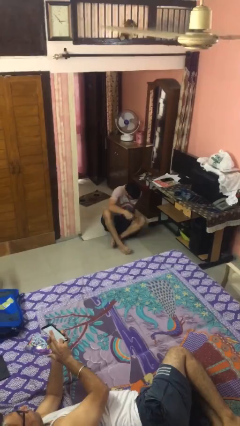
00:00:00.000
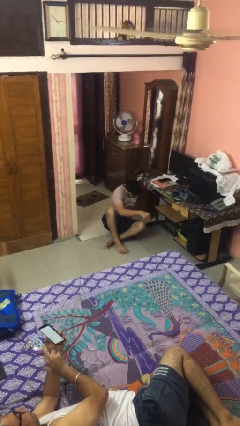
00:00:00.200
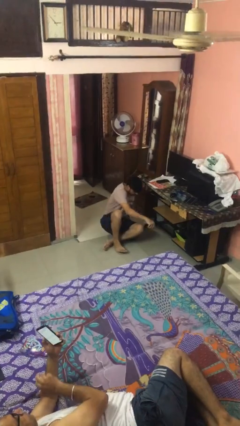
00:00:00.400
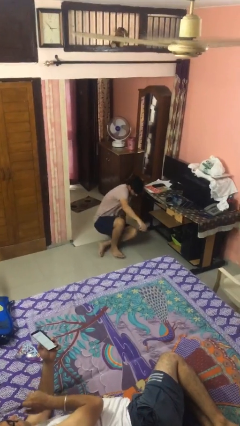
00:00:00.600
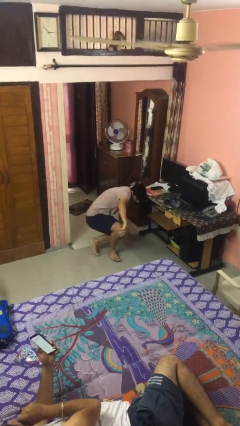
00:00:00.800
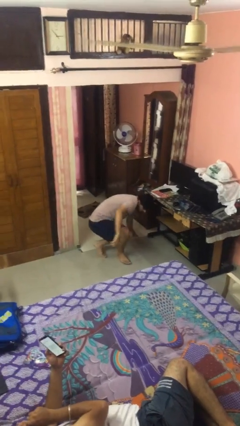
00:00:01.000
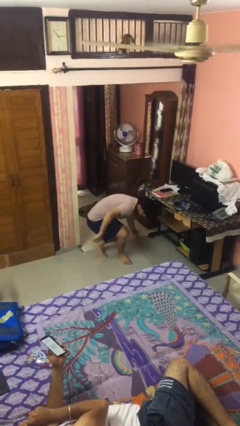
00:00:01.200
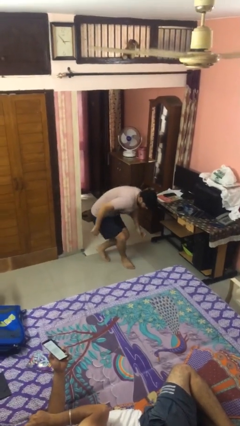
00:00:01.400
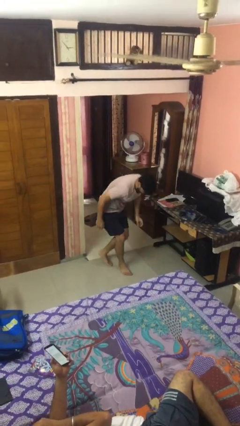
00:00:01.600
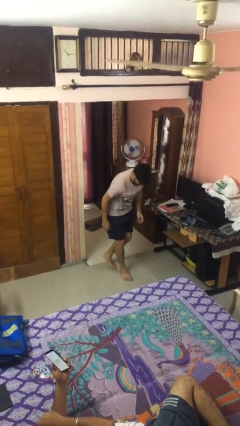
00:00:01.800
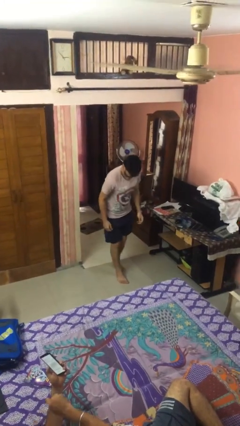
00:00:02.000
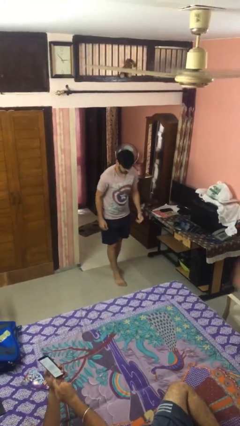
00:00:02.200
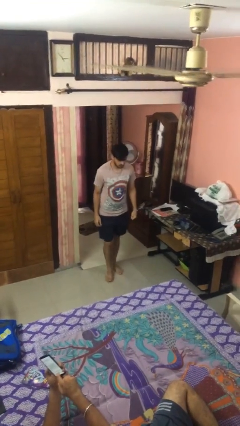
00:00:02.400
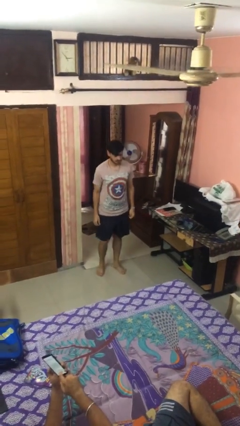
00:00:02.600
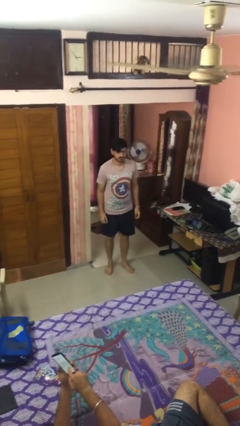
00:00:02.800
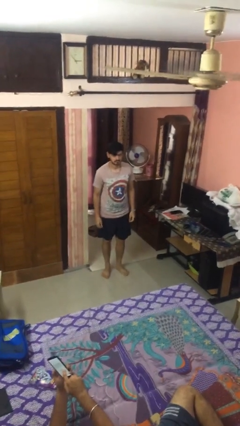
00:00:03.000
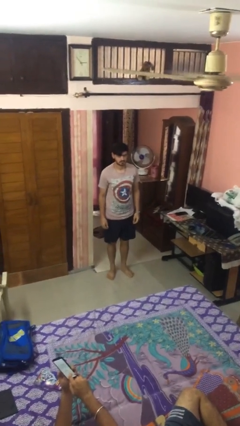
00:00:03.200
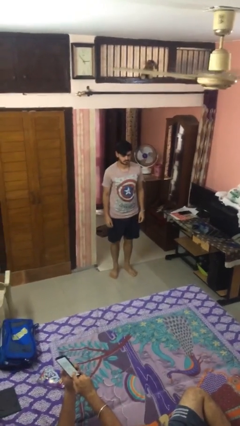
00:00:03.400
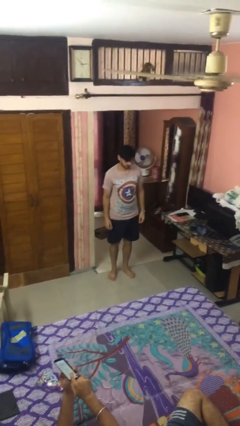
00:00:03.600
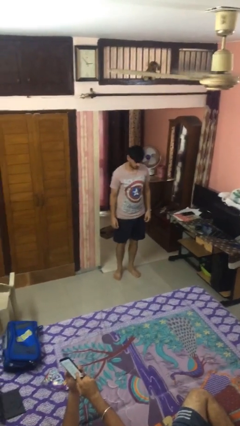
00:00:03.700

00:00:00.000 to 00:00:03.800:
person stands up from floor

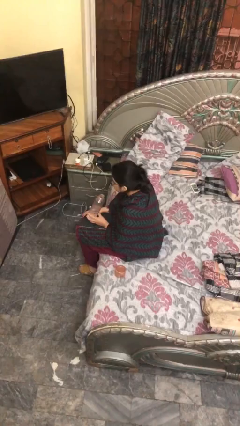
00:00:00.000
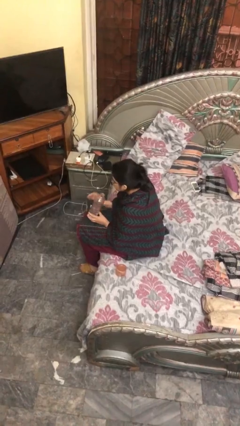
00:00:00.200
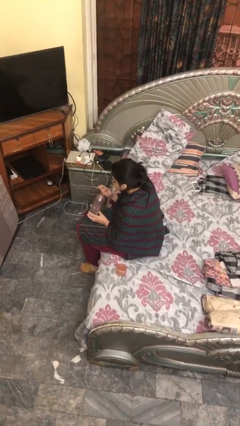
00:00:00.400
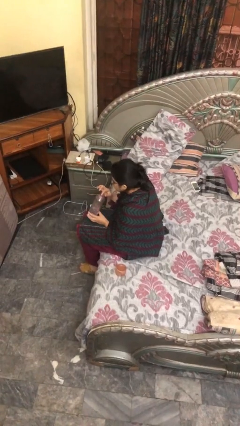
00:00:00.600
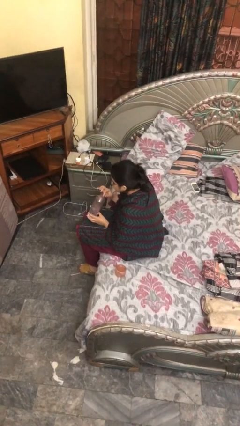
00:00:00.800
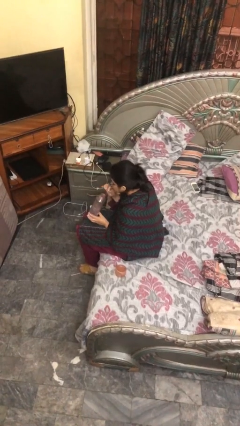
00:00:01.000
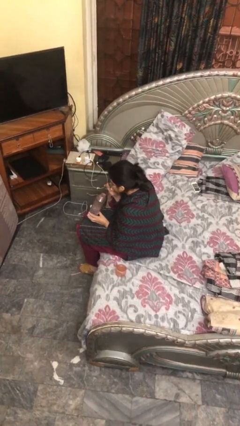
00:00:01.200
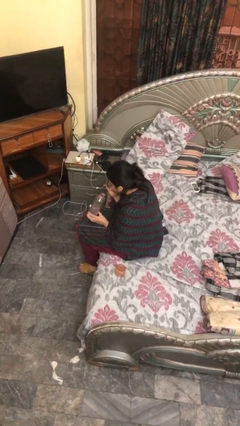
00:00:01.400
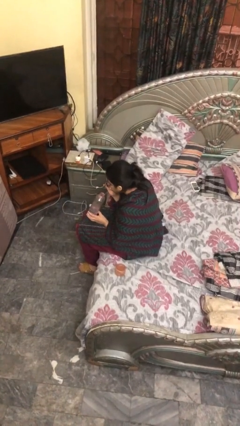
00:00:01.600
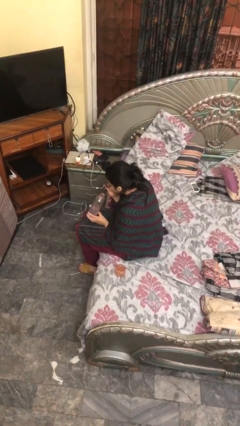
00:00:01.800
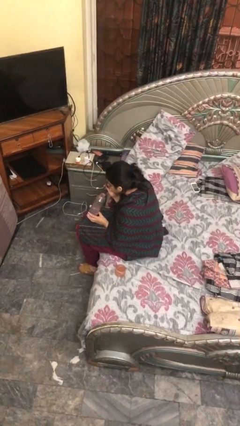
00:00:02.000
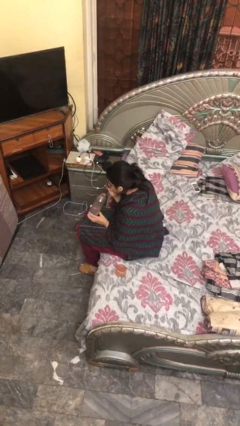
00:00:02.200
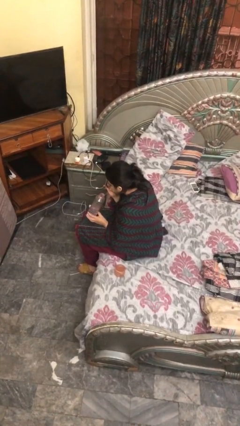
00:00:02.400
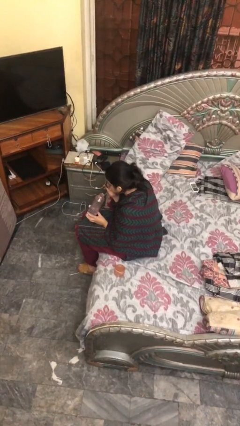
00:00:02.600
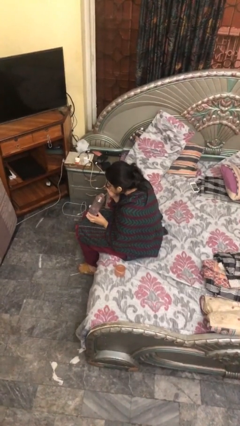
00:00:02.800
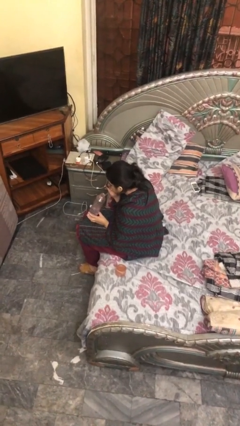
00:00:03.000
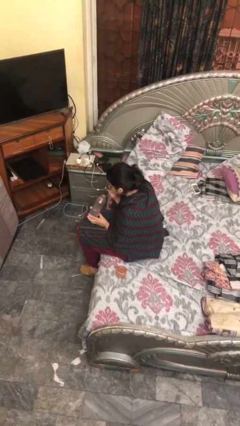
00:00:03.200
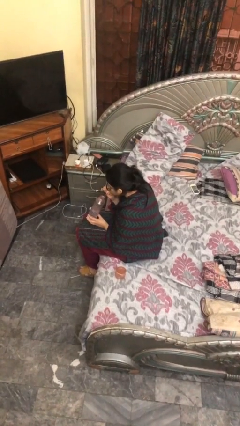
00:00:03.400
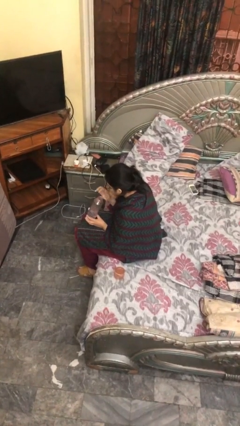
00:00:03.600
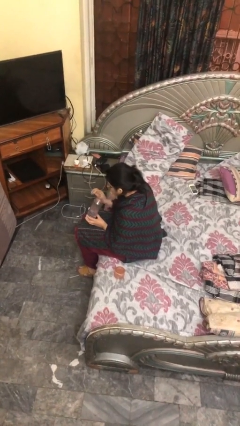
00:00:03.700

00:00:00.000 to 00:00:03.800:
person drinks from straw

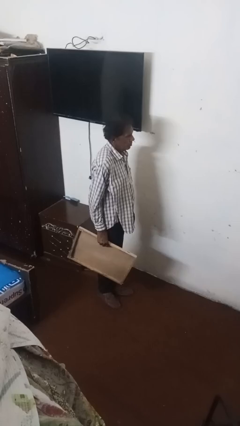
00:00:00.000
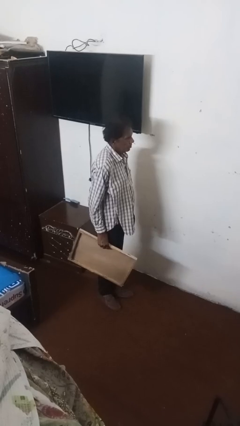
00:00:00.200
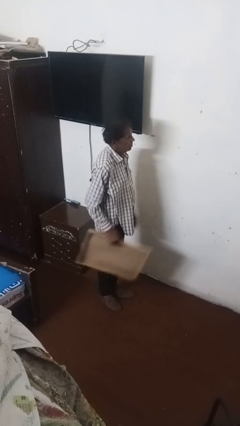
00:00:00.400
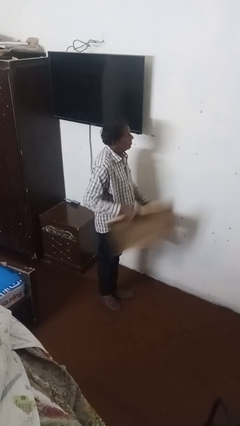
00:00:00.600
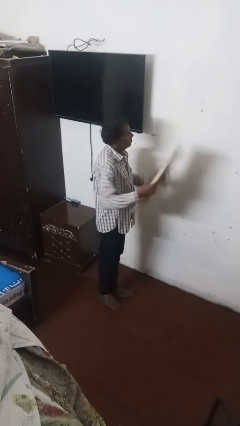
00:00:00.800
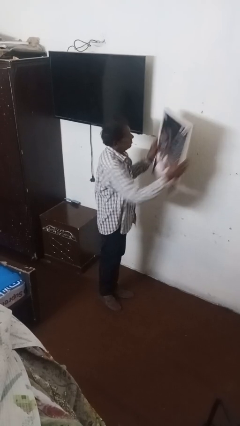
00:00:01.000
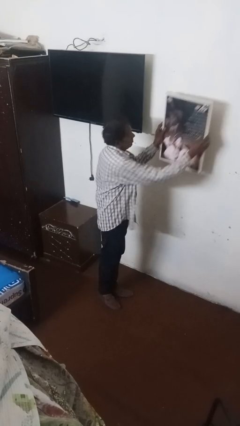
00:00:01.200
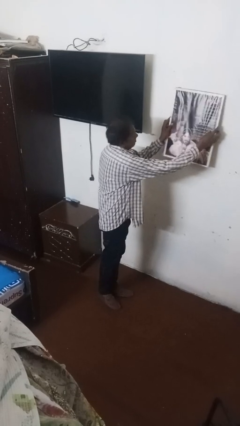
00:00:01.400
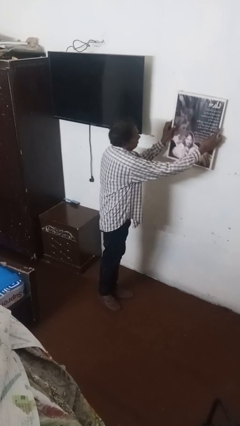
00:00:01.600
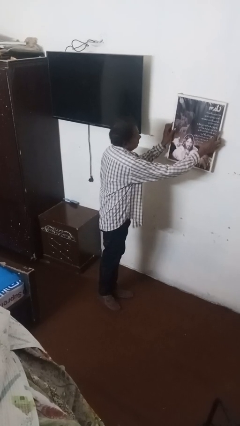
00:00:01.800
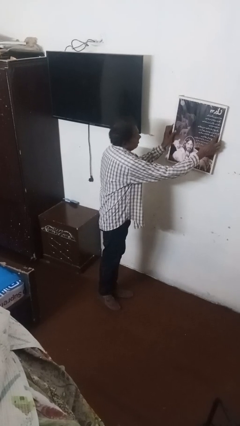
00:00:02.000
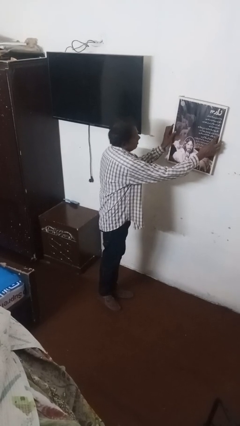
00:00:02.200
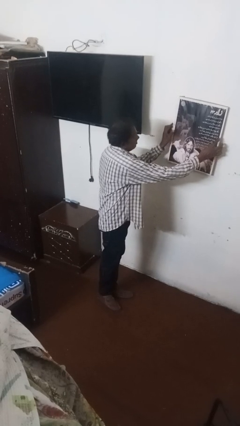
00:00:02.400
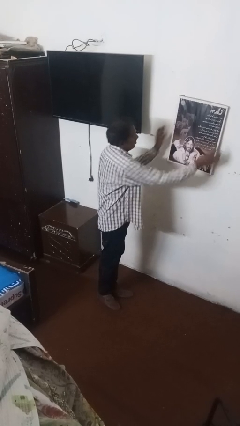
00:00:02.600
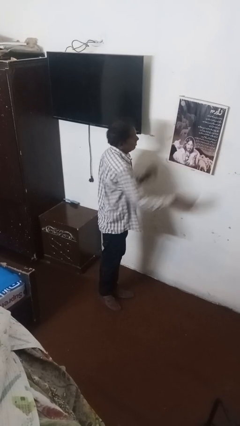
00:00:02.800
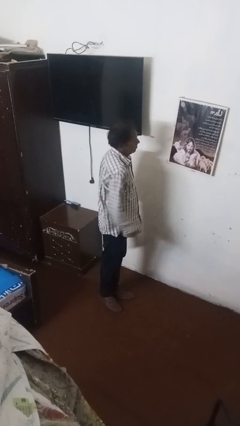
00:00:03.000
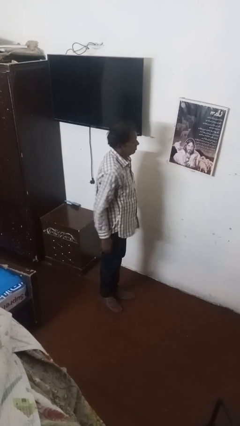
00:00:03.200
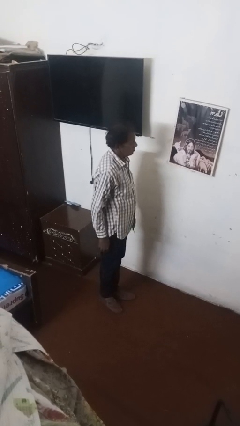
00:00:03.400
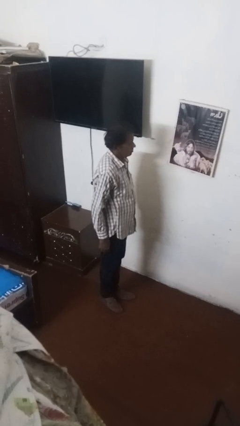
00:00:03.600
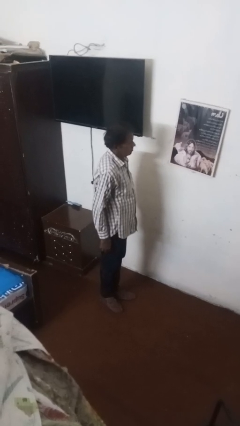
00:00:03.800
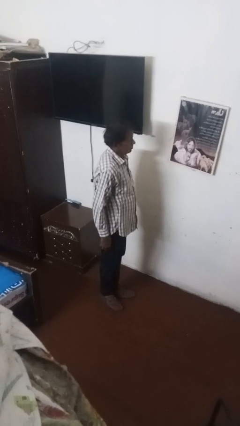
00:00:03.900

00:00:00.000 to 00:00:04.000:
person puts up picture frame

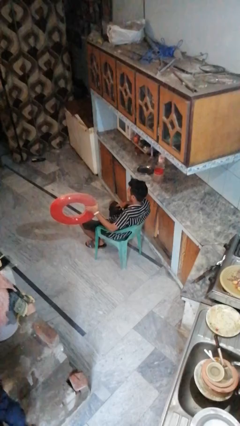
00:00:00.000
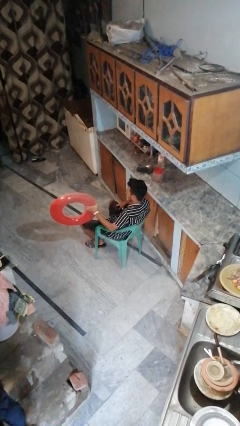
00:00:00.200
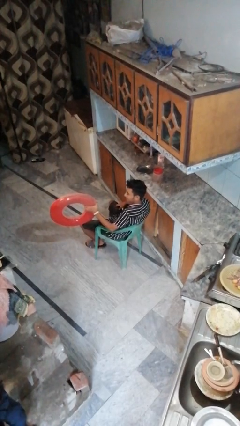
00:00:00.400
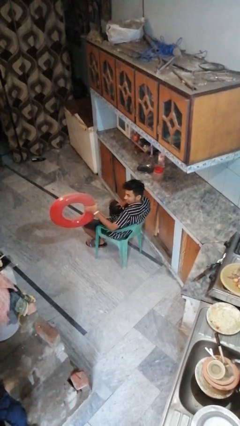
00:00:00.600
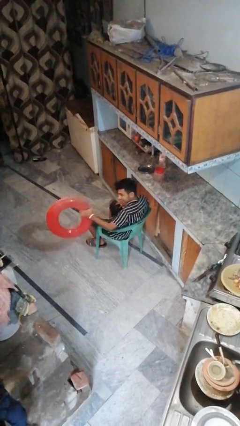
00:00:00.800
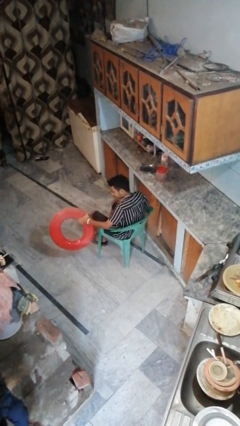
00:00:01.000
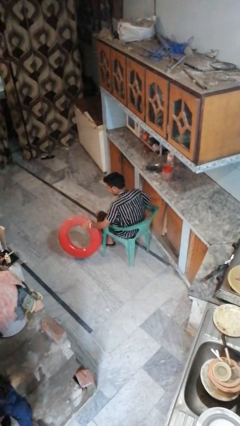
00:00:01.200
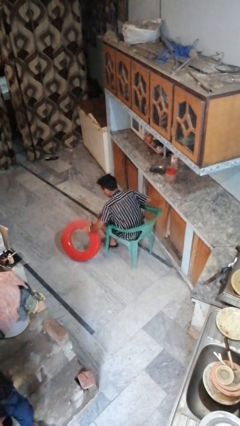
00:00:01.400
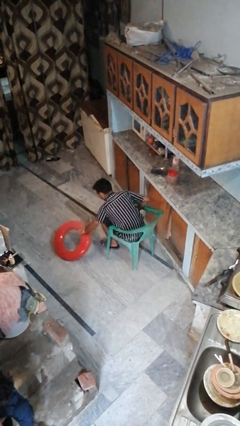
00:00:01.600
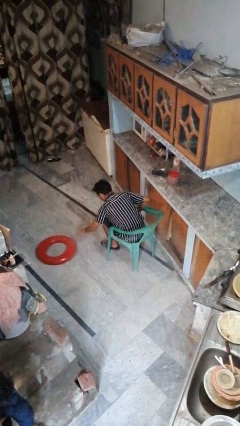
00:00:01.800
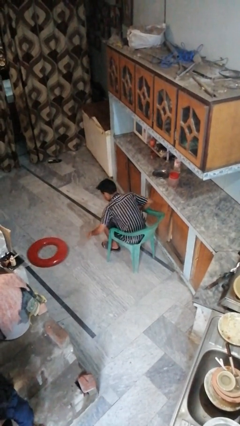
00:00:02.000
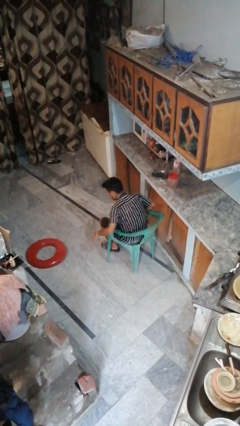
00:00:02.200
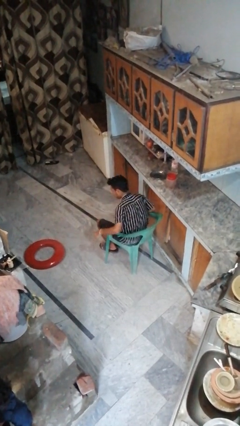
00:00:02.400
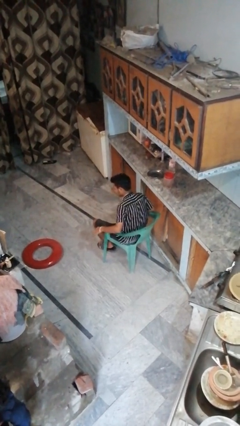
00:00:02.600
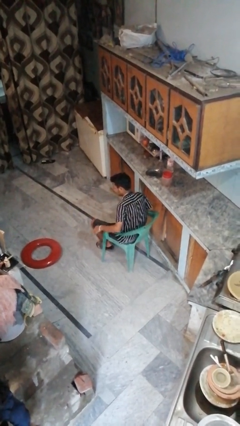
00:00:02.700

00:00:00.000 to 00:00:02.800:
person throws object to ground

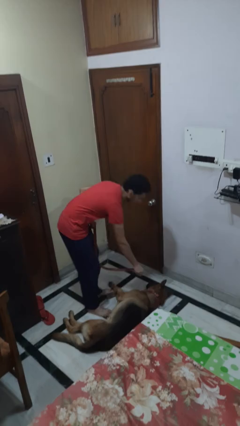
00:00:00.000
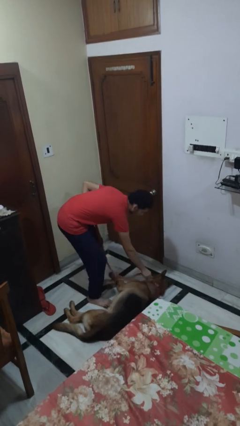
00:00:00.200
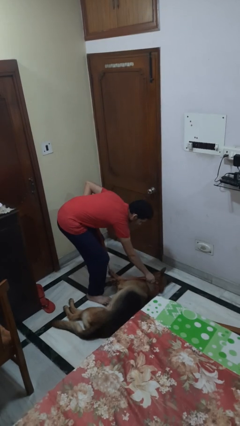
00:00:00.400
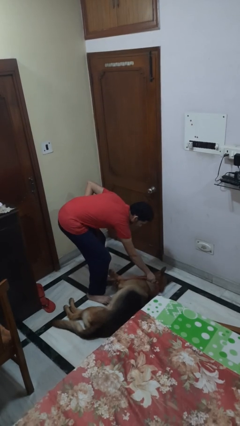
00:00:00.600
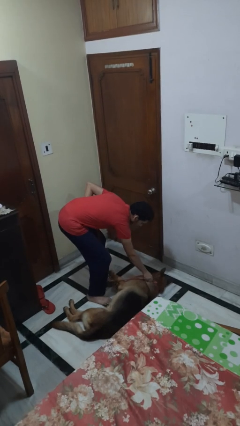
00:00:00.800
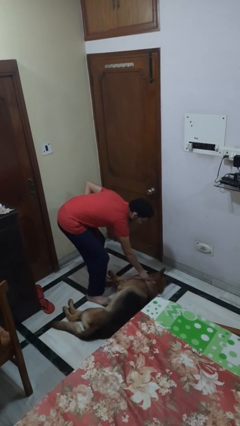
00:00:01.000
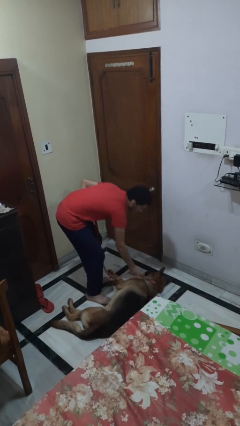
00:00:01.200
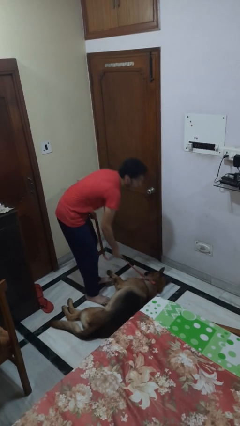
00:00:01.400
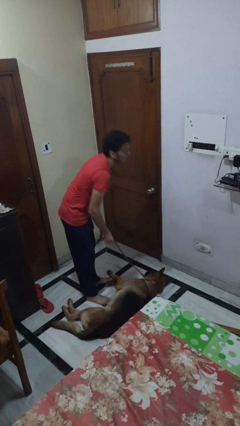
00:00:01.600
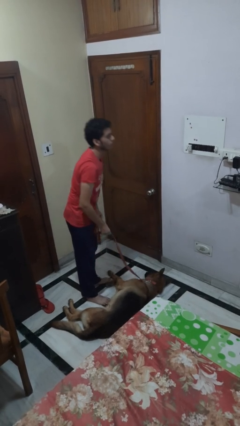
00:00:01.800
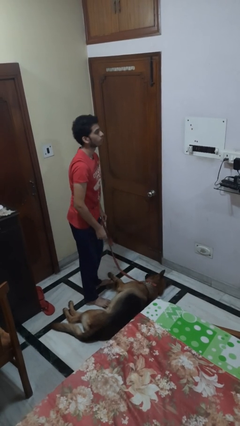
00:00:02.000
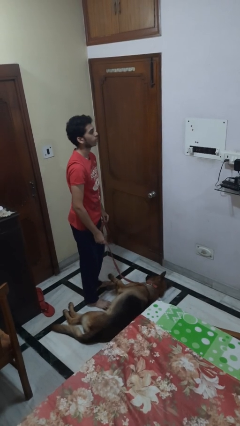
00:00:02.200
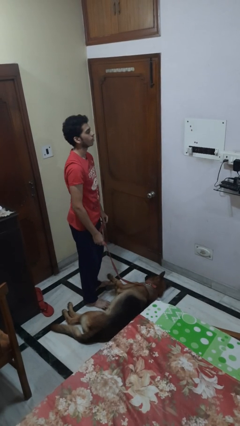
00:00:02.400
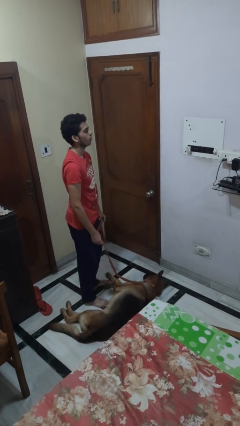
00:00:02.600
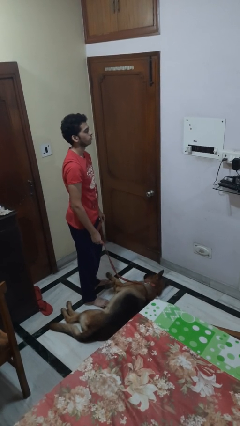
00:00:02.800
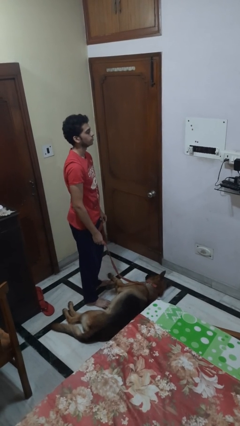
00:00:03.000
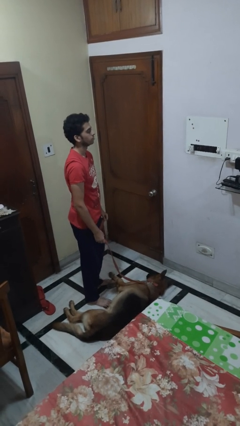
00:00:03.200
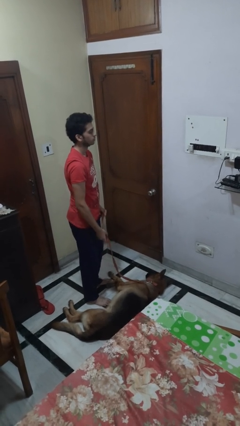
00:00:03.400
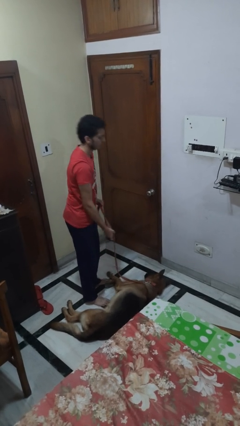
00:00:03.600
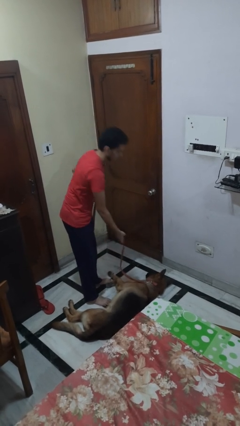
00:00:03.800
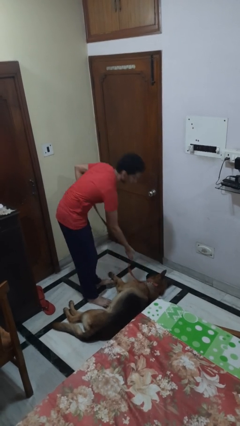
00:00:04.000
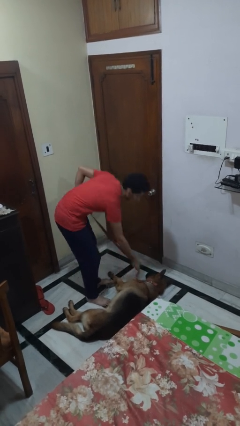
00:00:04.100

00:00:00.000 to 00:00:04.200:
person attaches leash to dog
